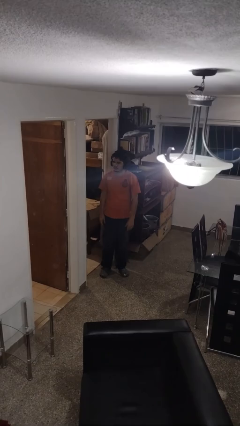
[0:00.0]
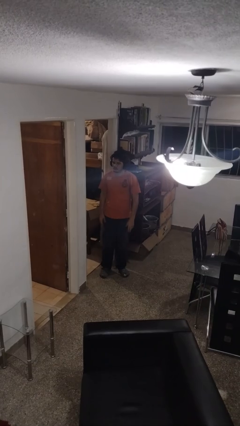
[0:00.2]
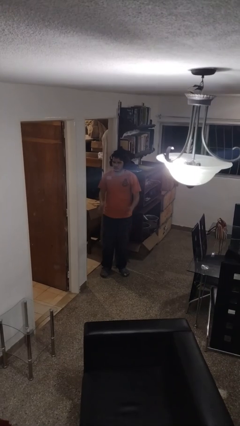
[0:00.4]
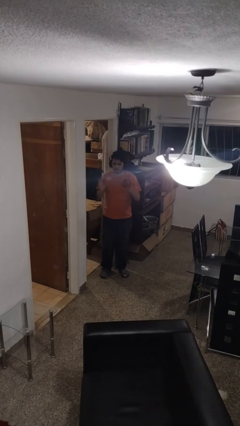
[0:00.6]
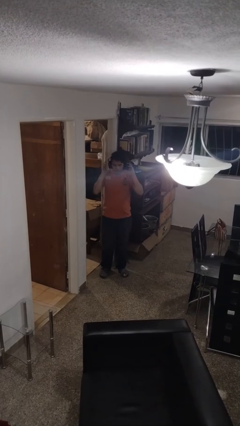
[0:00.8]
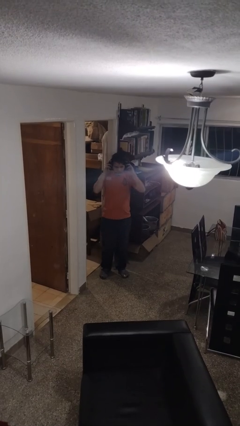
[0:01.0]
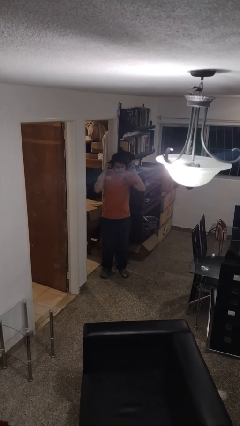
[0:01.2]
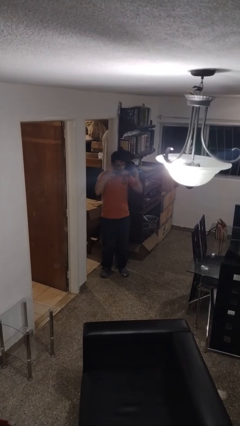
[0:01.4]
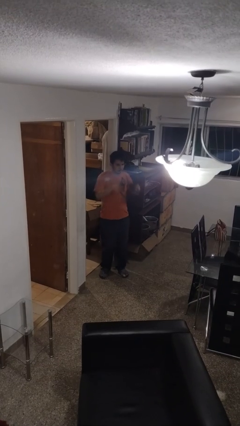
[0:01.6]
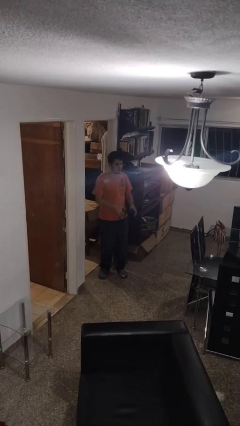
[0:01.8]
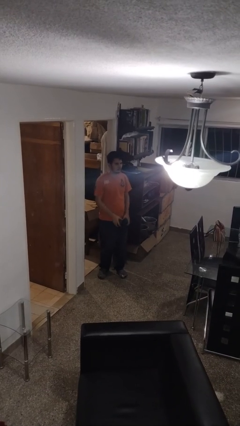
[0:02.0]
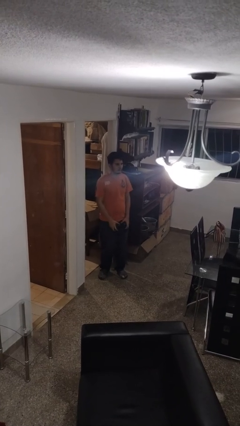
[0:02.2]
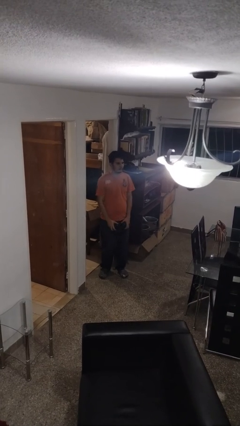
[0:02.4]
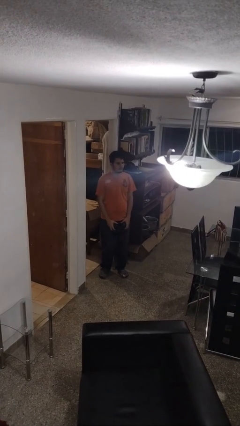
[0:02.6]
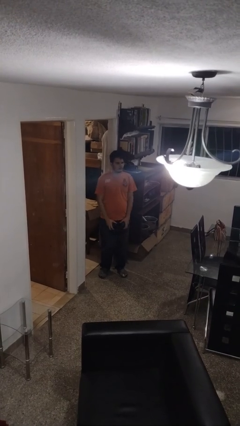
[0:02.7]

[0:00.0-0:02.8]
person takes off headphones

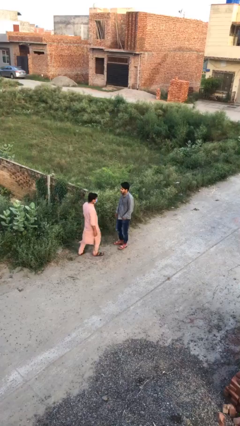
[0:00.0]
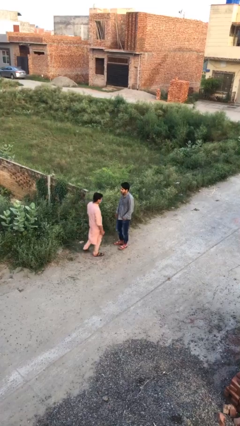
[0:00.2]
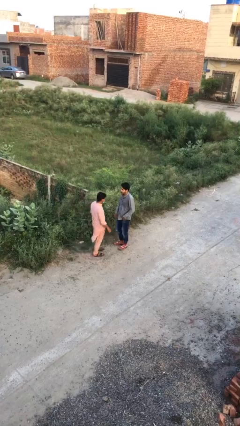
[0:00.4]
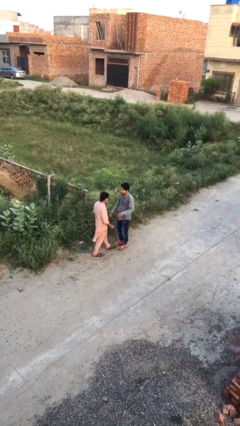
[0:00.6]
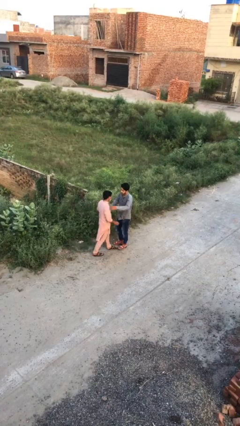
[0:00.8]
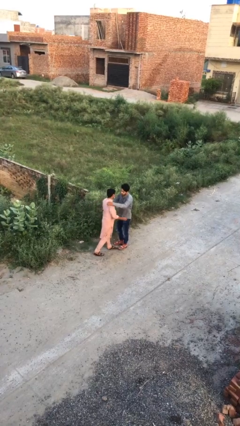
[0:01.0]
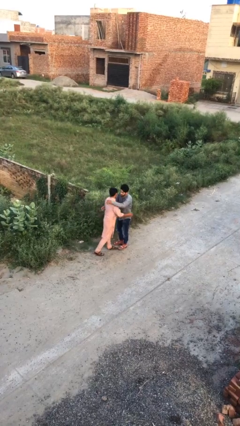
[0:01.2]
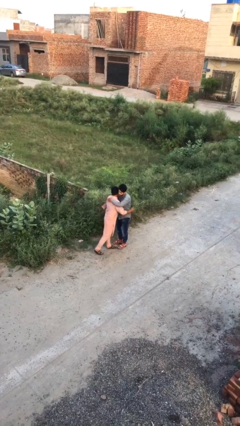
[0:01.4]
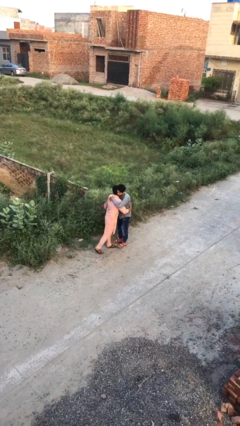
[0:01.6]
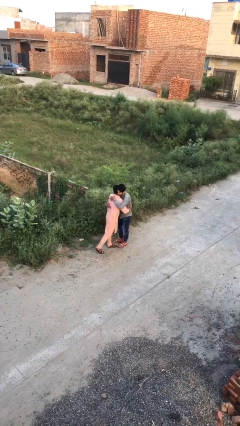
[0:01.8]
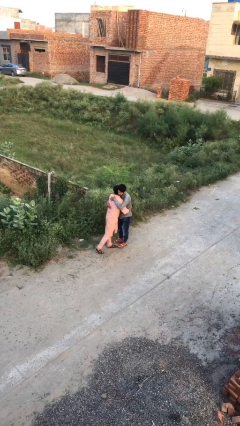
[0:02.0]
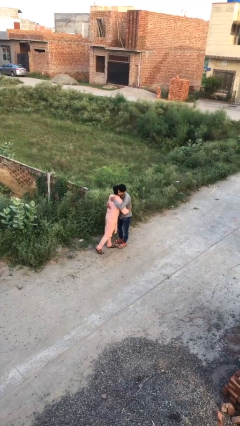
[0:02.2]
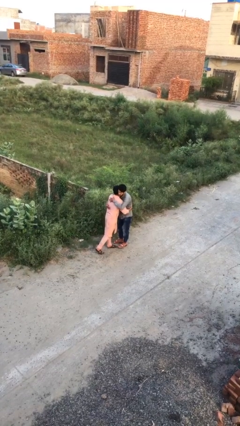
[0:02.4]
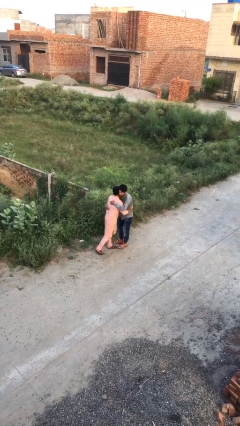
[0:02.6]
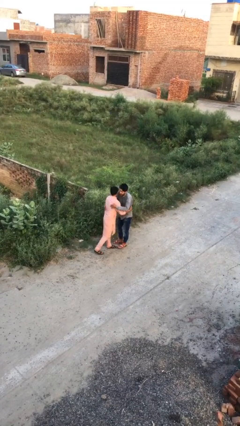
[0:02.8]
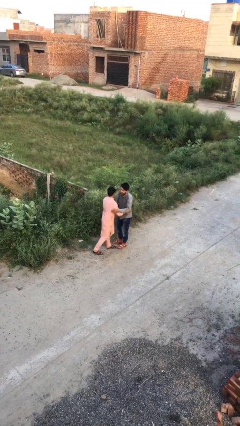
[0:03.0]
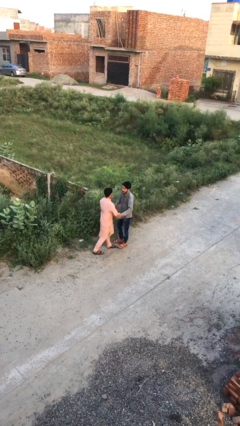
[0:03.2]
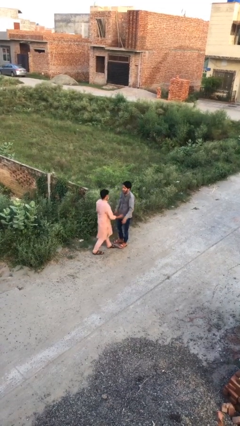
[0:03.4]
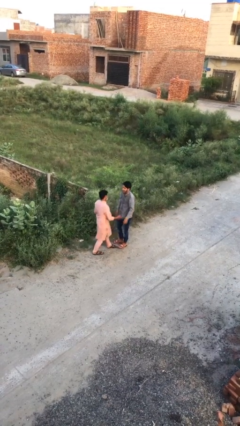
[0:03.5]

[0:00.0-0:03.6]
person embraces person

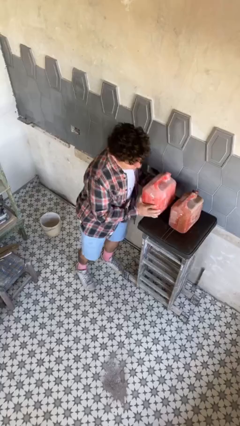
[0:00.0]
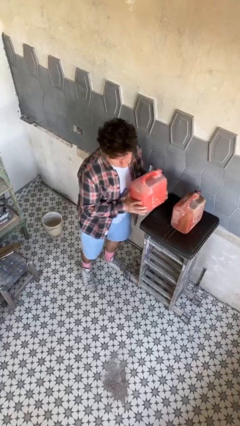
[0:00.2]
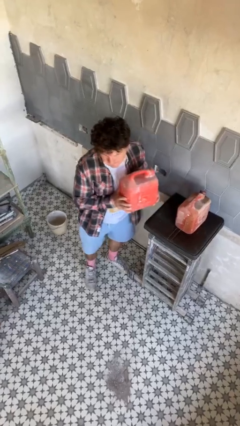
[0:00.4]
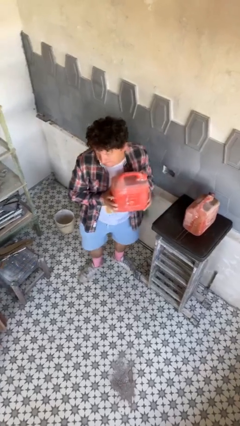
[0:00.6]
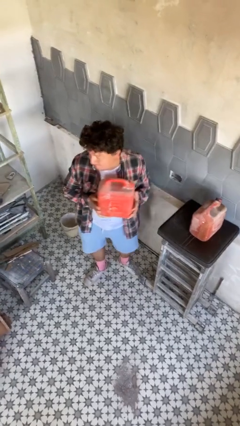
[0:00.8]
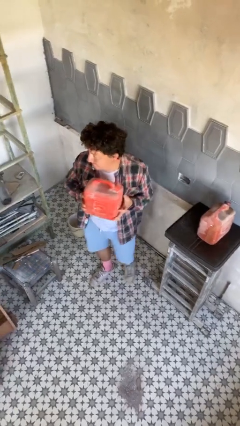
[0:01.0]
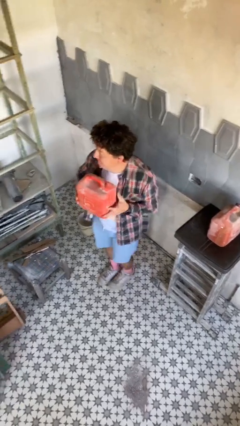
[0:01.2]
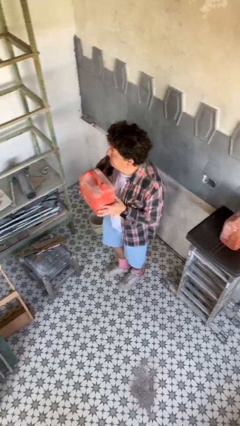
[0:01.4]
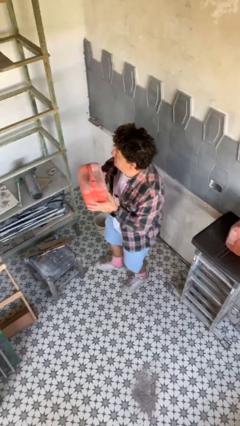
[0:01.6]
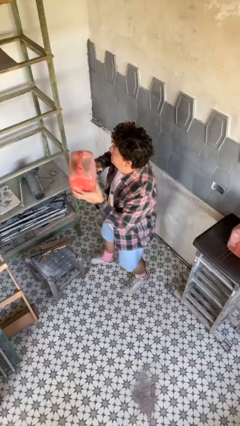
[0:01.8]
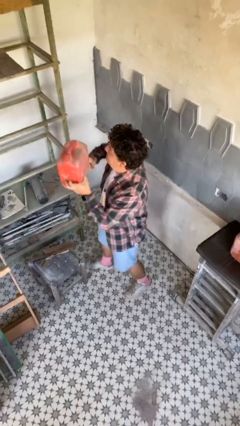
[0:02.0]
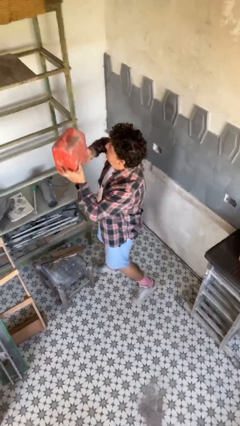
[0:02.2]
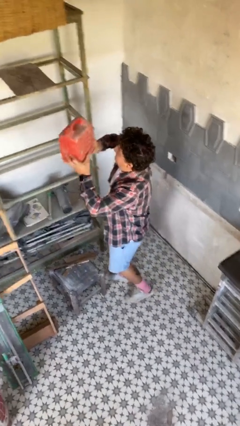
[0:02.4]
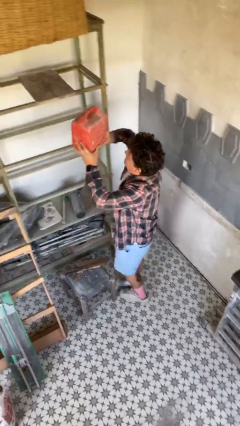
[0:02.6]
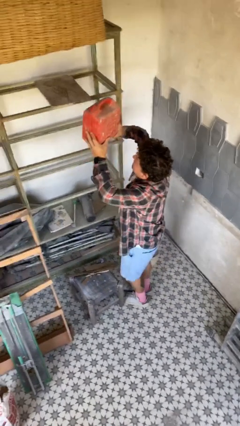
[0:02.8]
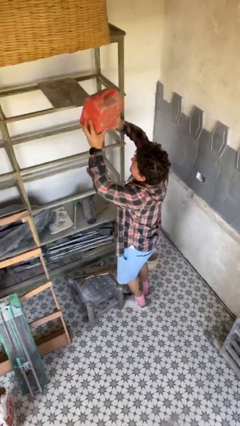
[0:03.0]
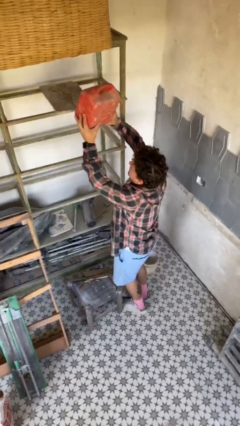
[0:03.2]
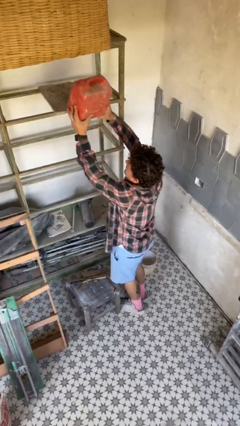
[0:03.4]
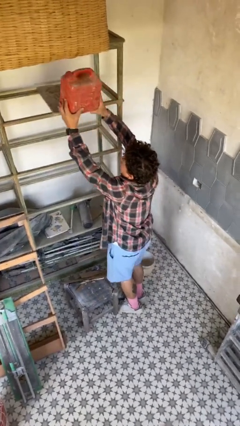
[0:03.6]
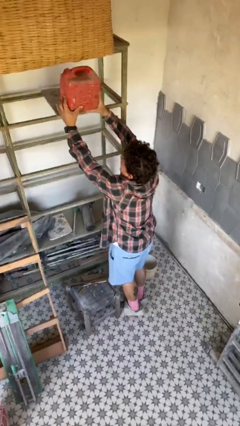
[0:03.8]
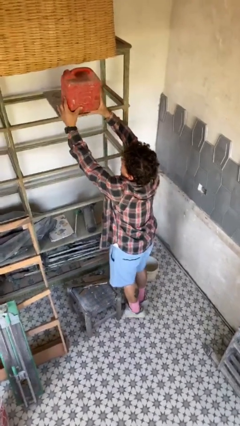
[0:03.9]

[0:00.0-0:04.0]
person picks up object from table

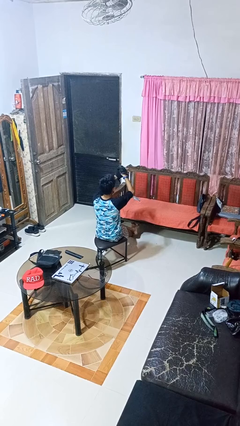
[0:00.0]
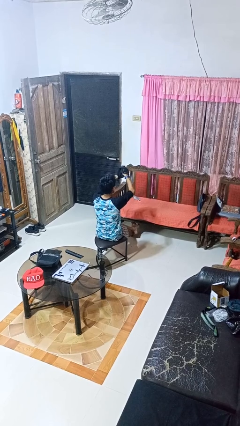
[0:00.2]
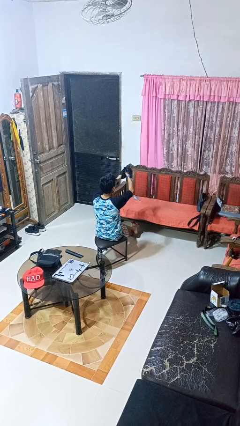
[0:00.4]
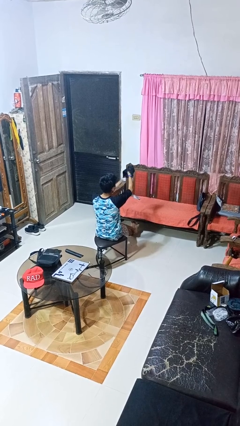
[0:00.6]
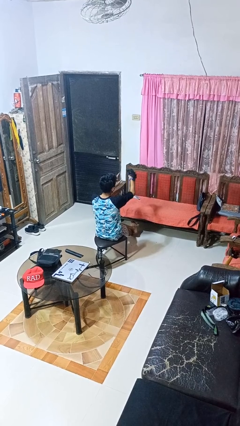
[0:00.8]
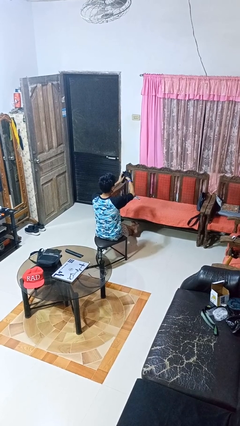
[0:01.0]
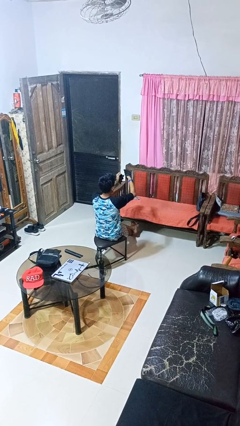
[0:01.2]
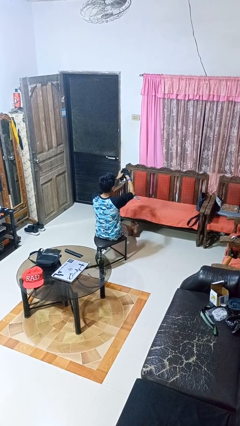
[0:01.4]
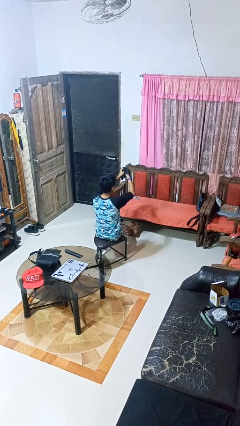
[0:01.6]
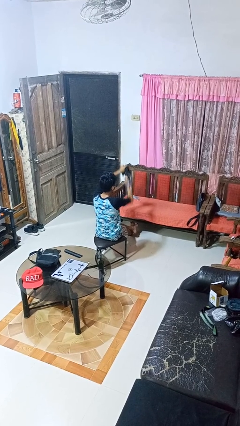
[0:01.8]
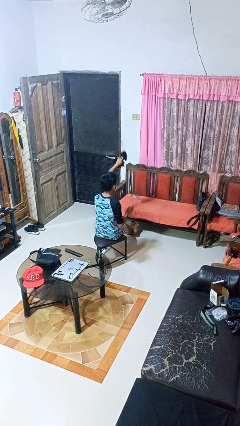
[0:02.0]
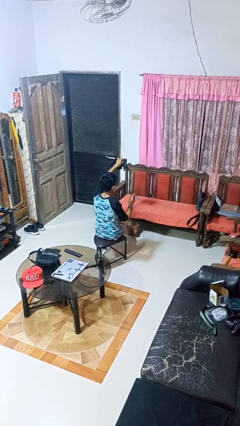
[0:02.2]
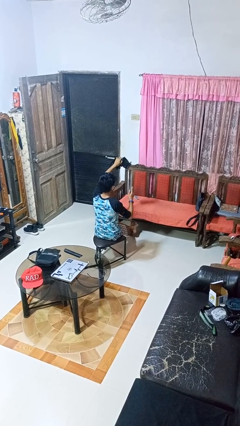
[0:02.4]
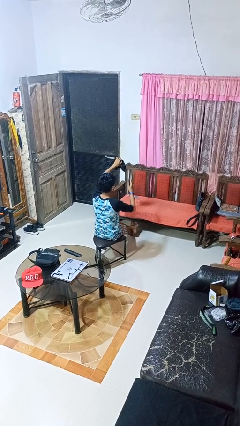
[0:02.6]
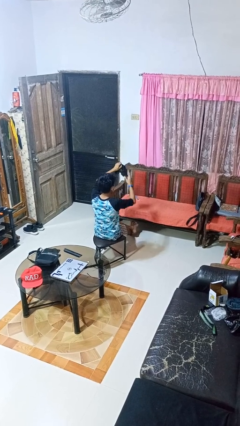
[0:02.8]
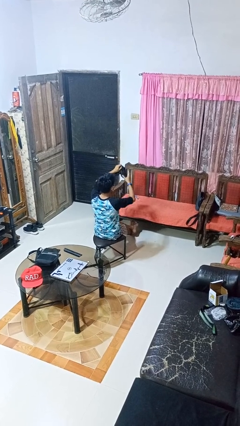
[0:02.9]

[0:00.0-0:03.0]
person takes off gloves

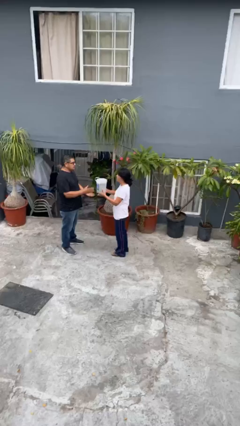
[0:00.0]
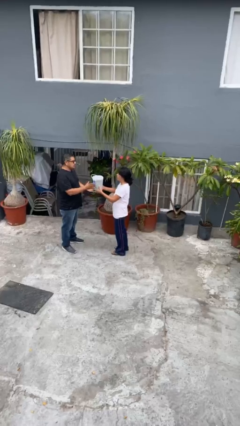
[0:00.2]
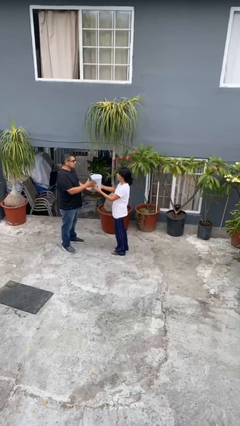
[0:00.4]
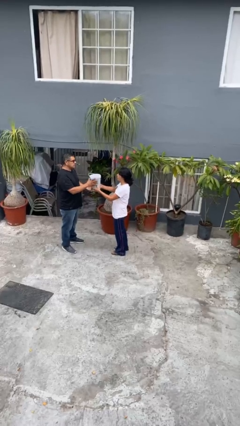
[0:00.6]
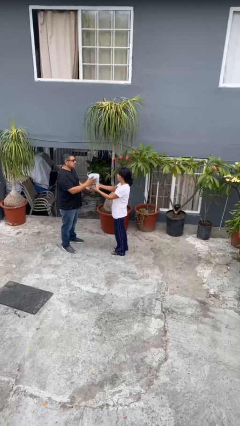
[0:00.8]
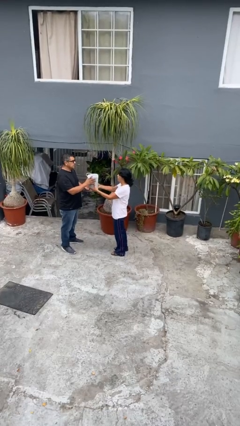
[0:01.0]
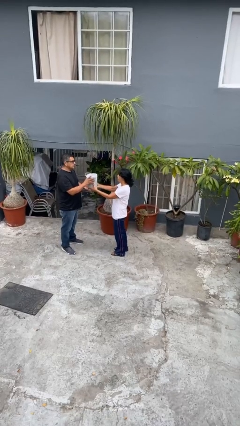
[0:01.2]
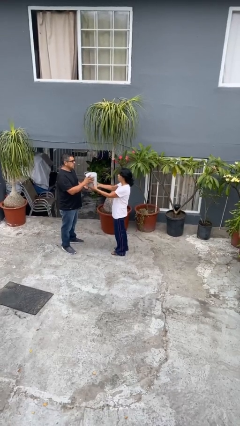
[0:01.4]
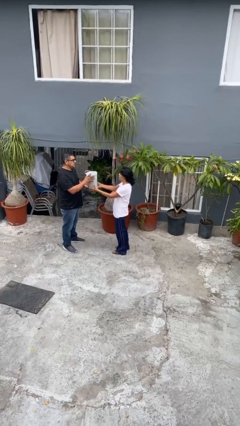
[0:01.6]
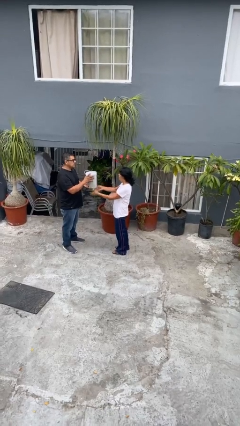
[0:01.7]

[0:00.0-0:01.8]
person transfers object to person

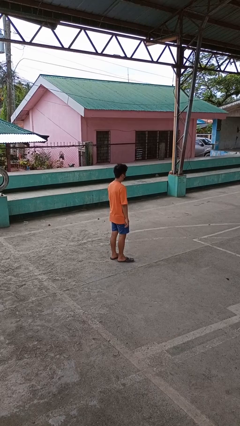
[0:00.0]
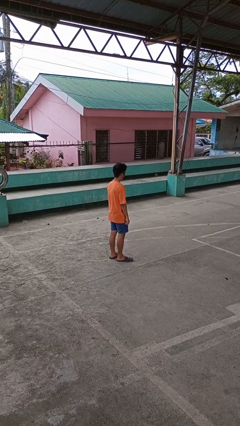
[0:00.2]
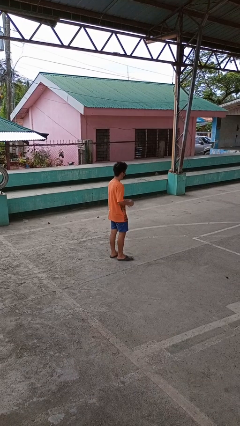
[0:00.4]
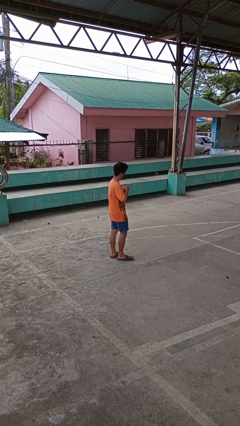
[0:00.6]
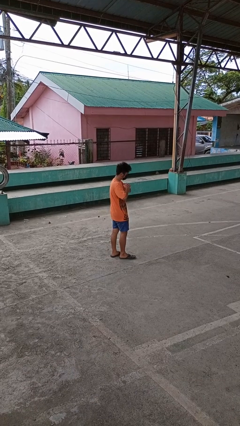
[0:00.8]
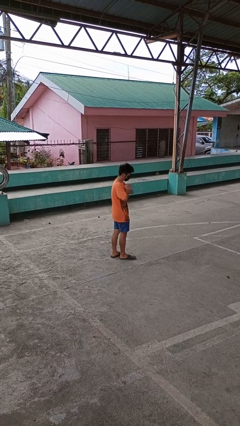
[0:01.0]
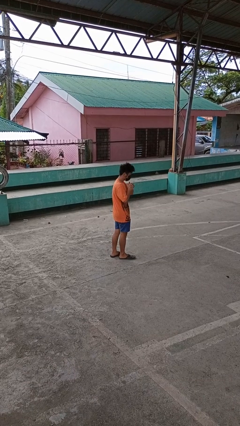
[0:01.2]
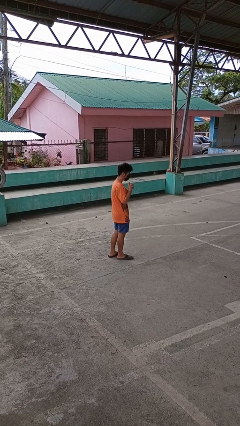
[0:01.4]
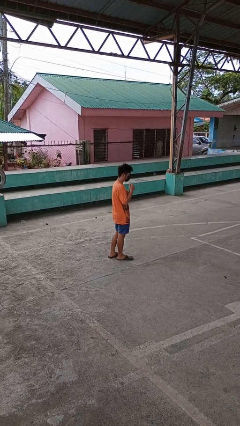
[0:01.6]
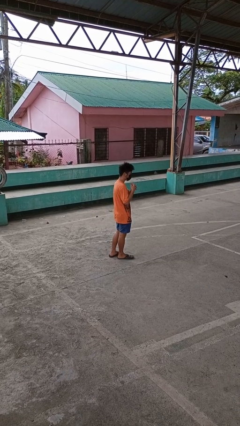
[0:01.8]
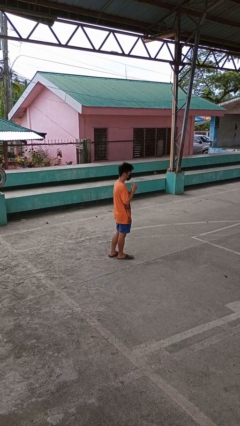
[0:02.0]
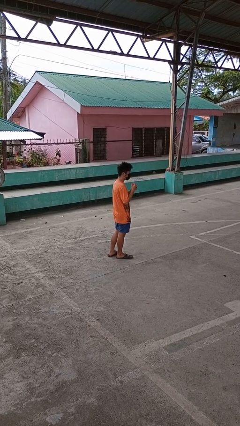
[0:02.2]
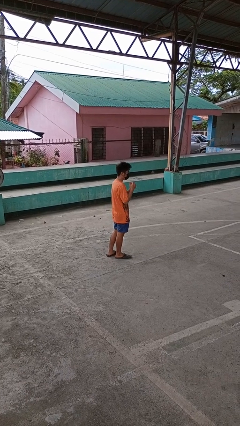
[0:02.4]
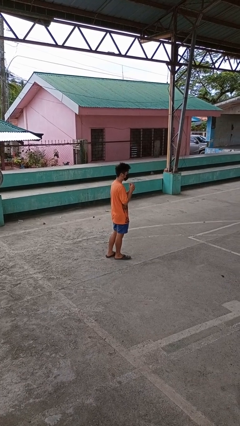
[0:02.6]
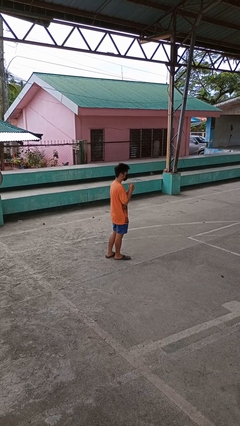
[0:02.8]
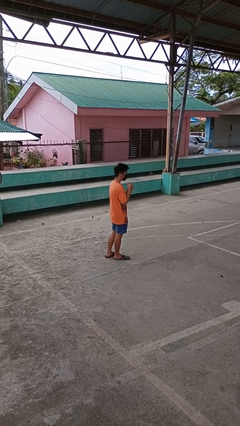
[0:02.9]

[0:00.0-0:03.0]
person cracks knuckles
